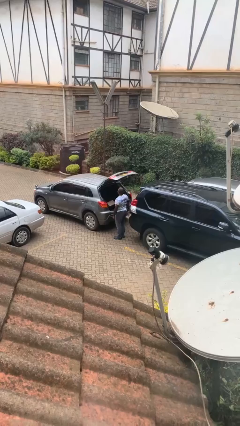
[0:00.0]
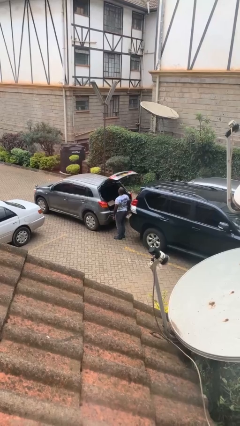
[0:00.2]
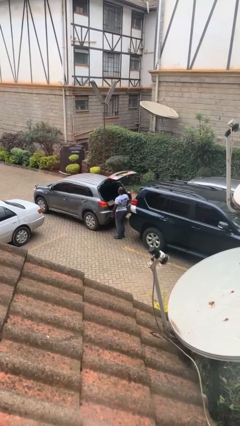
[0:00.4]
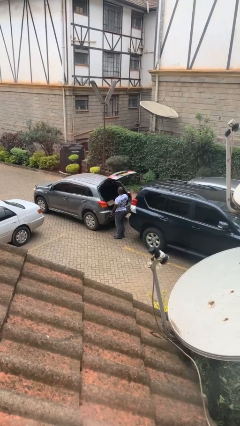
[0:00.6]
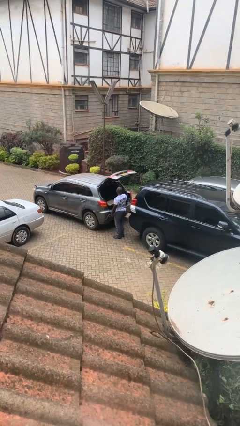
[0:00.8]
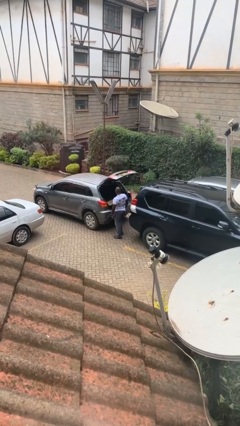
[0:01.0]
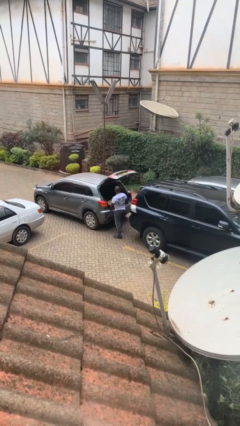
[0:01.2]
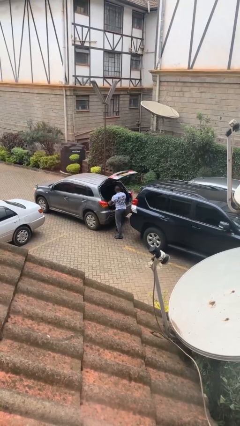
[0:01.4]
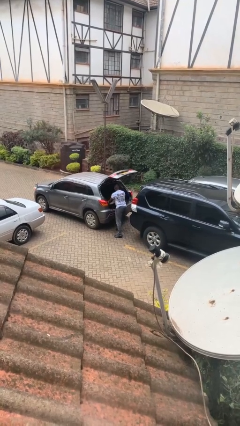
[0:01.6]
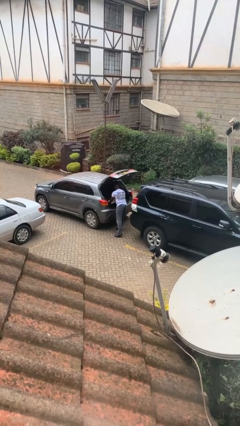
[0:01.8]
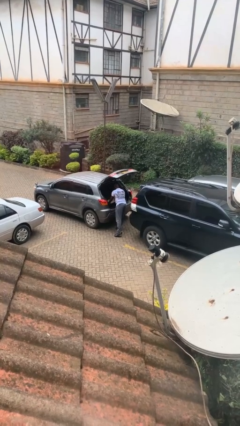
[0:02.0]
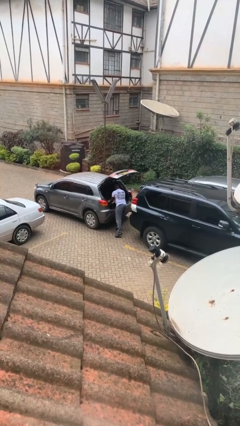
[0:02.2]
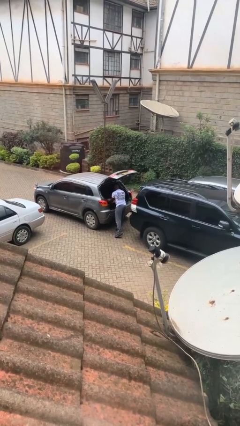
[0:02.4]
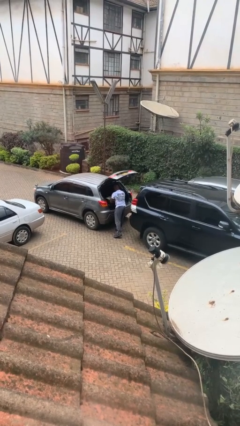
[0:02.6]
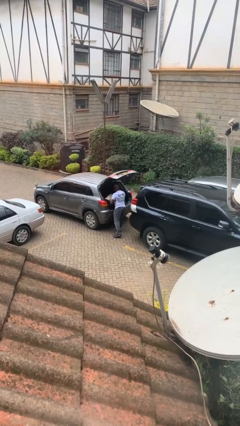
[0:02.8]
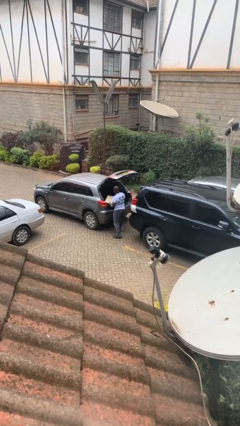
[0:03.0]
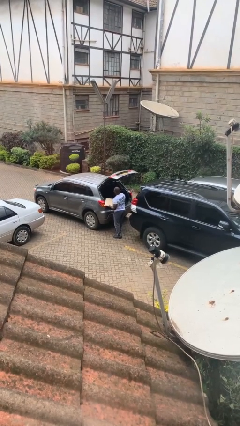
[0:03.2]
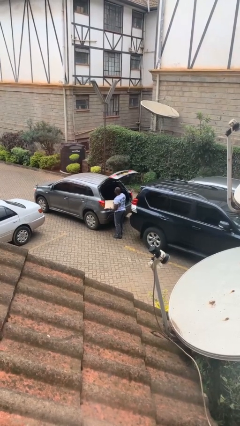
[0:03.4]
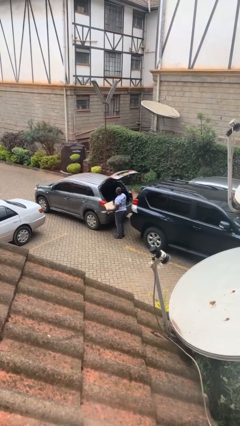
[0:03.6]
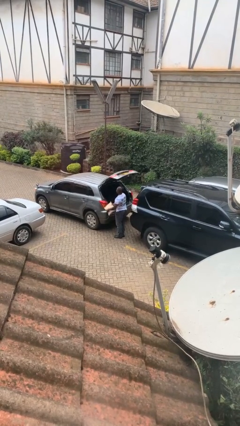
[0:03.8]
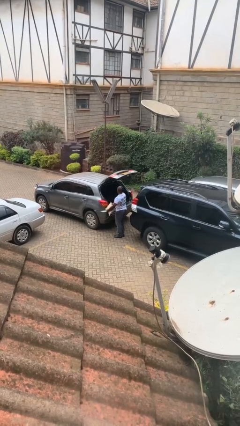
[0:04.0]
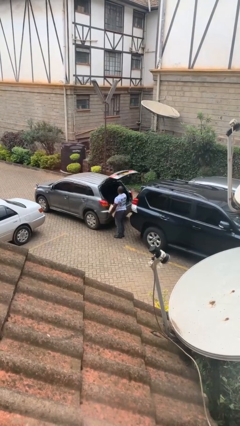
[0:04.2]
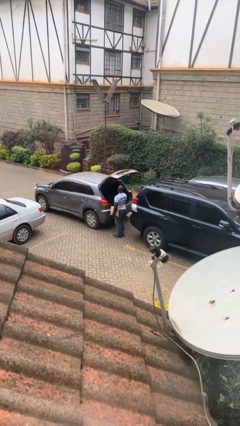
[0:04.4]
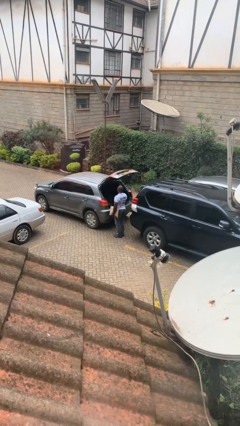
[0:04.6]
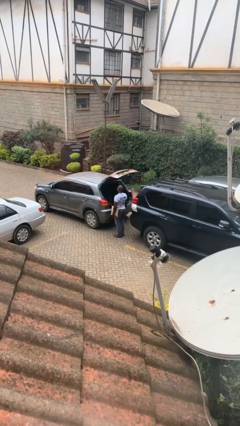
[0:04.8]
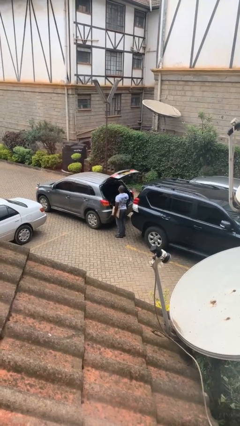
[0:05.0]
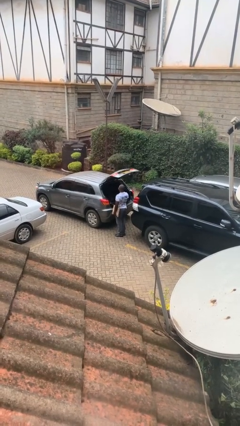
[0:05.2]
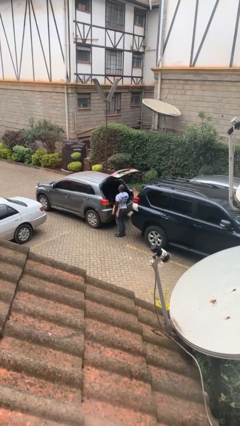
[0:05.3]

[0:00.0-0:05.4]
person unloads car

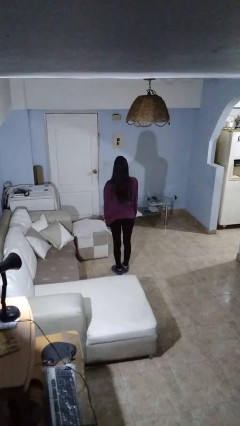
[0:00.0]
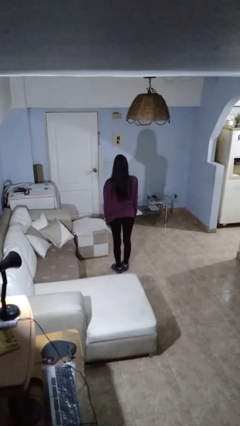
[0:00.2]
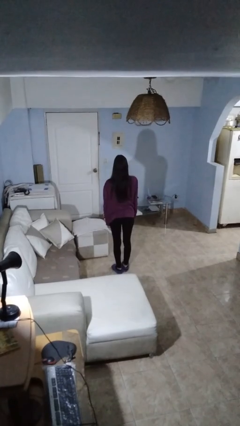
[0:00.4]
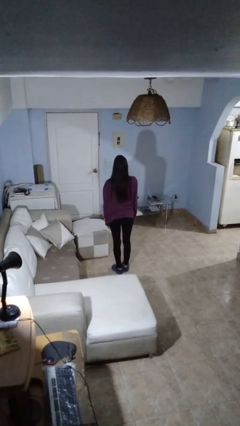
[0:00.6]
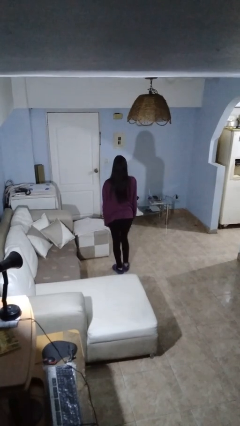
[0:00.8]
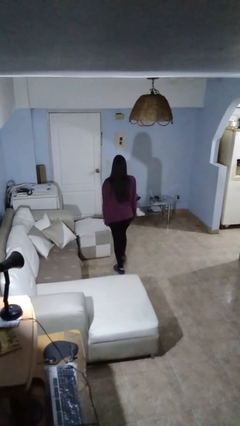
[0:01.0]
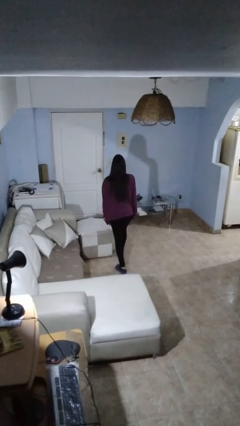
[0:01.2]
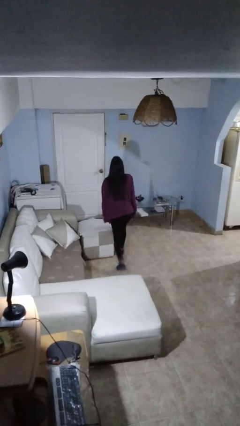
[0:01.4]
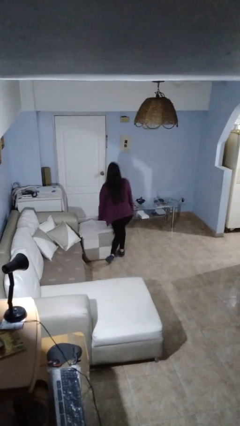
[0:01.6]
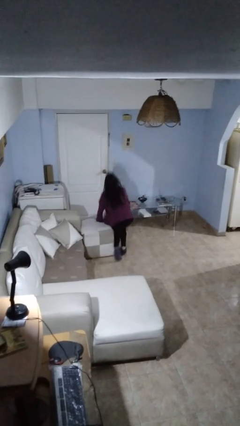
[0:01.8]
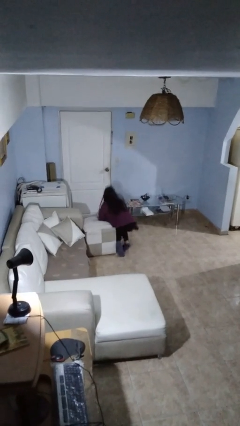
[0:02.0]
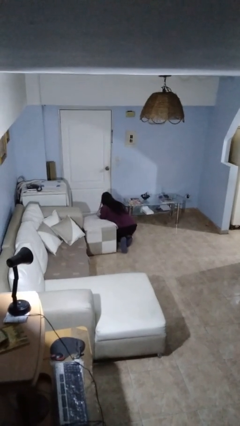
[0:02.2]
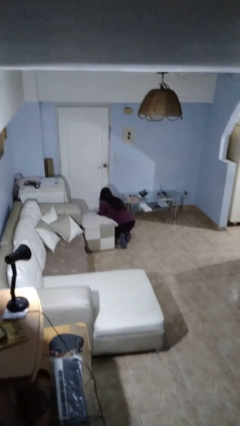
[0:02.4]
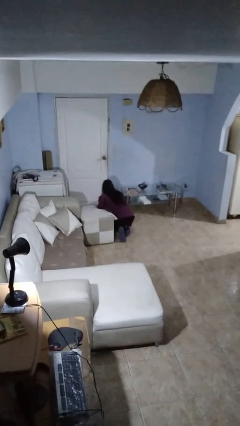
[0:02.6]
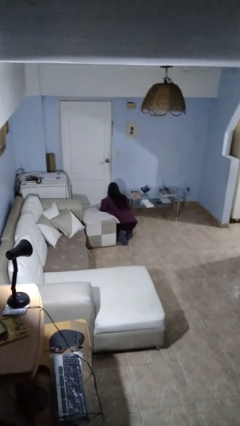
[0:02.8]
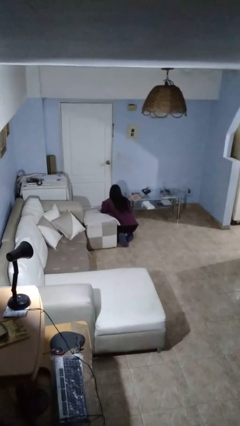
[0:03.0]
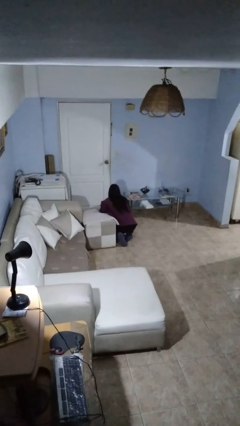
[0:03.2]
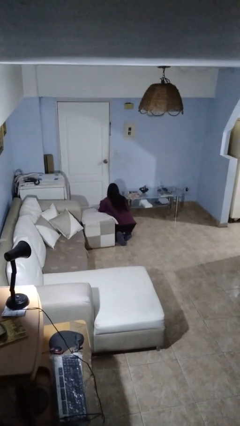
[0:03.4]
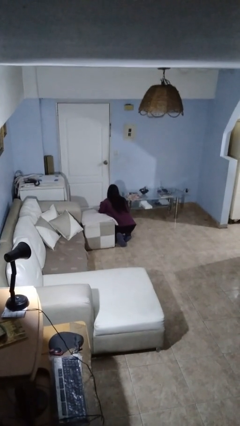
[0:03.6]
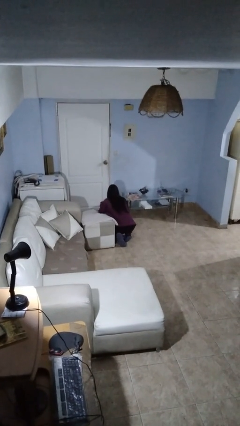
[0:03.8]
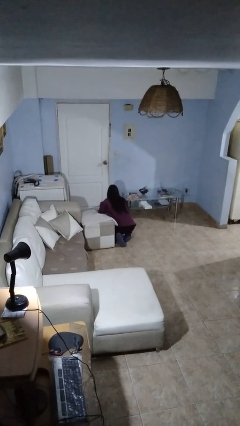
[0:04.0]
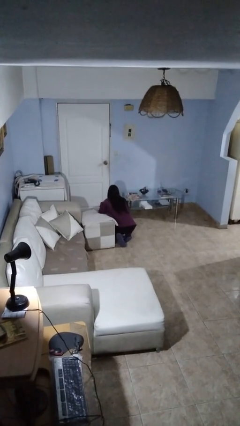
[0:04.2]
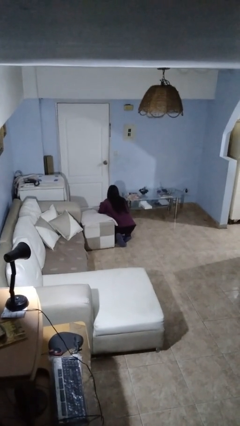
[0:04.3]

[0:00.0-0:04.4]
person trips on object on floor

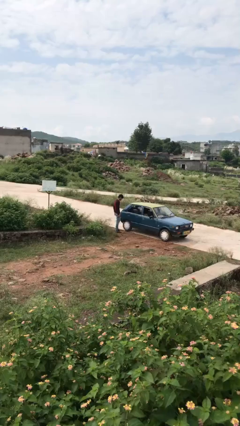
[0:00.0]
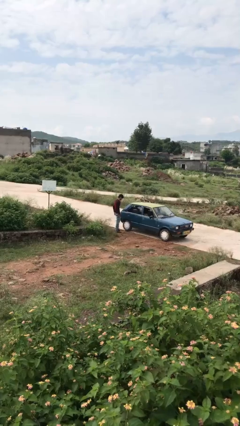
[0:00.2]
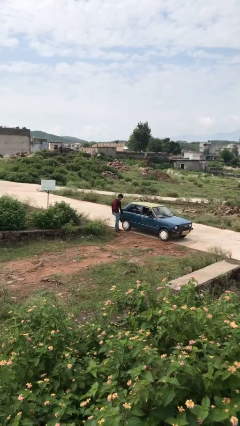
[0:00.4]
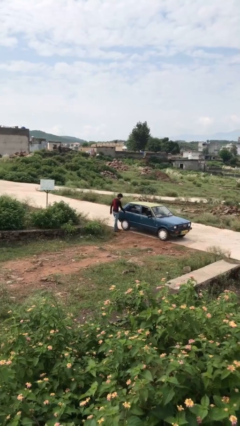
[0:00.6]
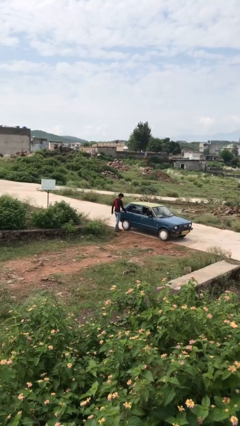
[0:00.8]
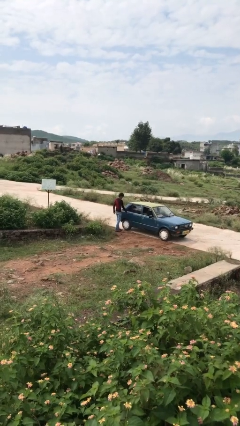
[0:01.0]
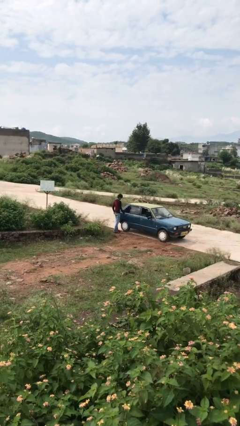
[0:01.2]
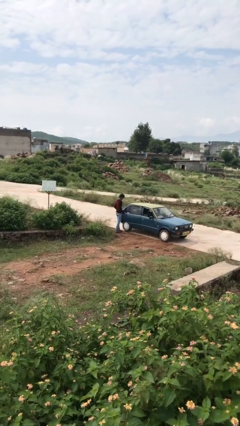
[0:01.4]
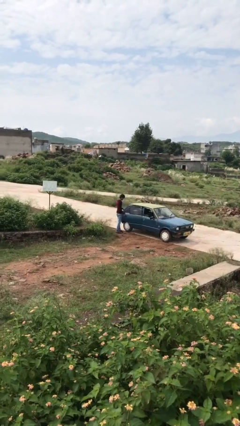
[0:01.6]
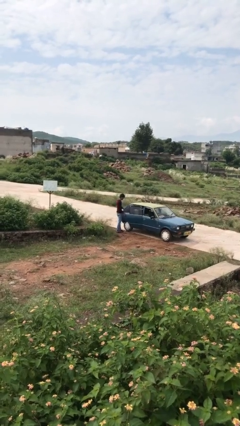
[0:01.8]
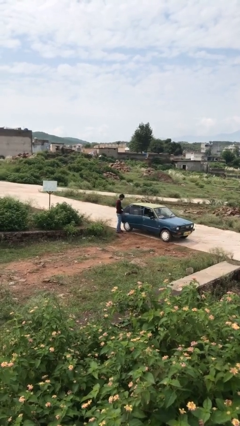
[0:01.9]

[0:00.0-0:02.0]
person opens car door

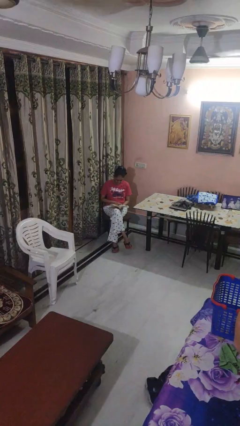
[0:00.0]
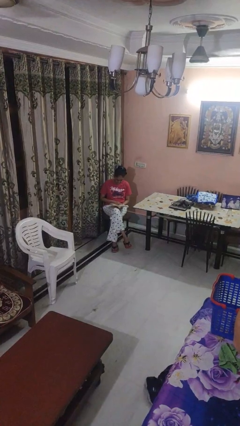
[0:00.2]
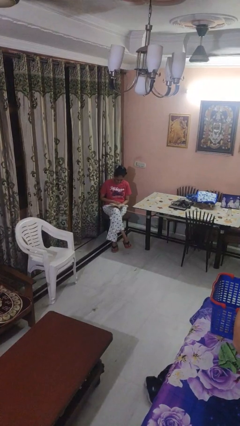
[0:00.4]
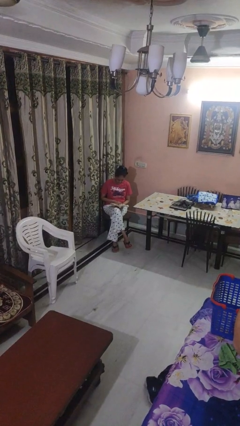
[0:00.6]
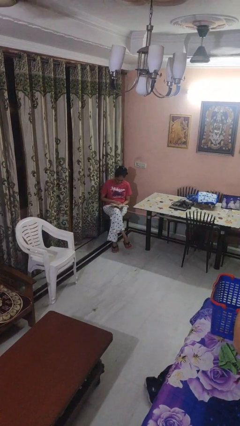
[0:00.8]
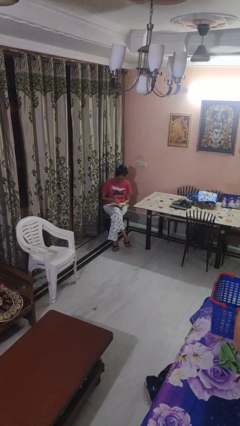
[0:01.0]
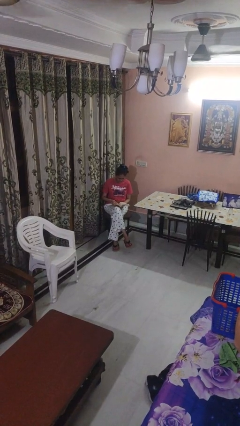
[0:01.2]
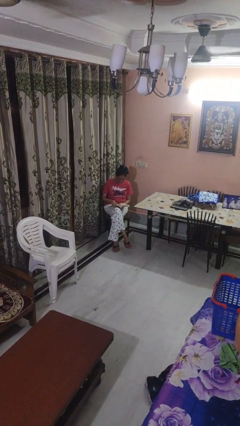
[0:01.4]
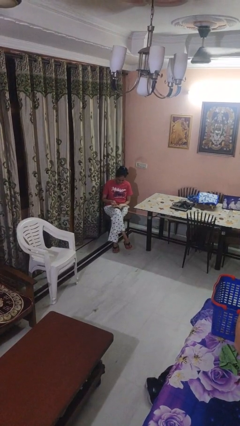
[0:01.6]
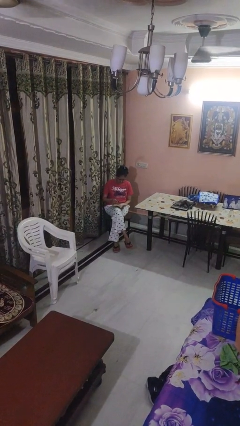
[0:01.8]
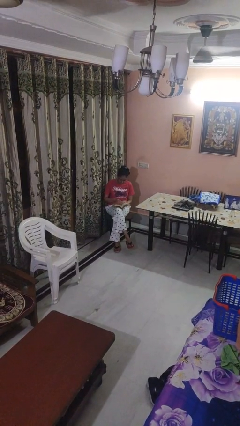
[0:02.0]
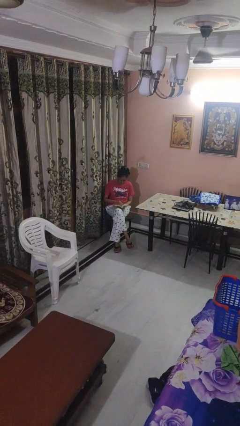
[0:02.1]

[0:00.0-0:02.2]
person reads book

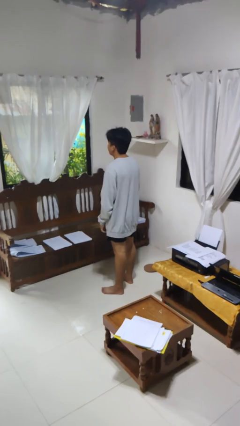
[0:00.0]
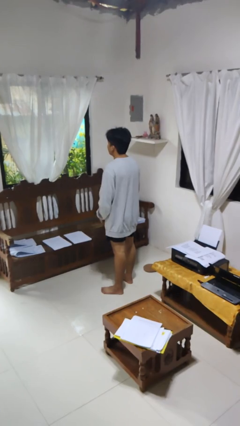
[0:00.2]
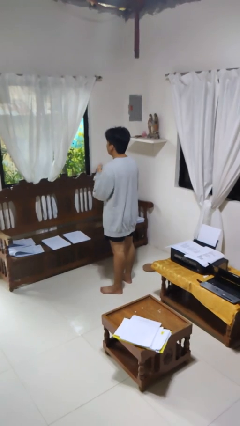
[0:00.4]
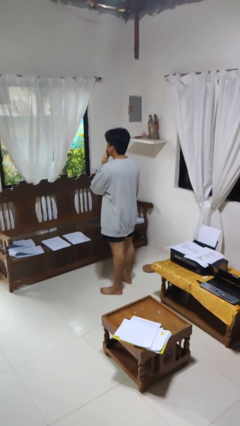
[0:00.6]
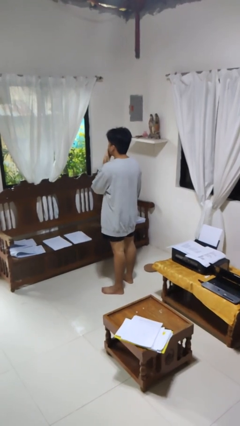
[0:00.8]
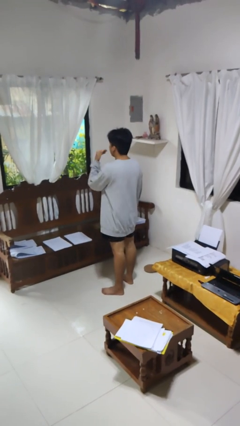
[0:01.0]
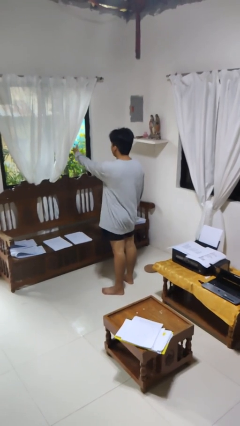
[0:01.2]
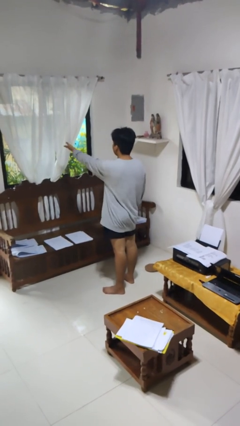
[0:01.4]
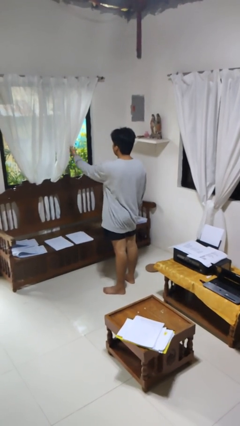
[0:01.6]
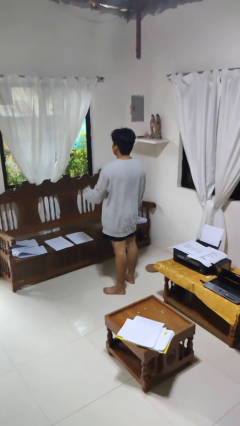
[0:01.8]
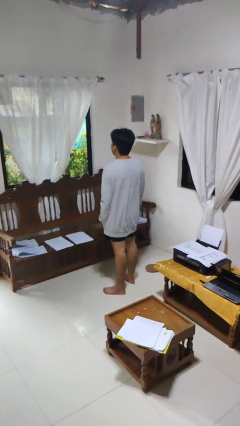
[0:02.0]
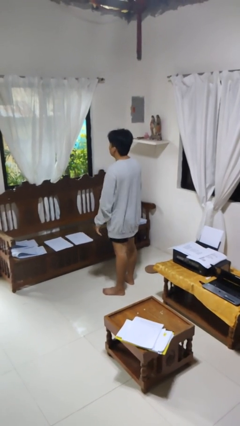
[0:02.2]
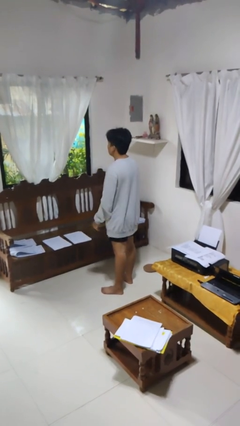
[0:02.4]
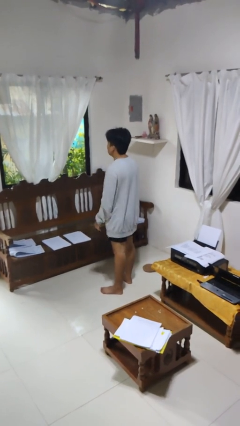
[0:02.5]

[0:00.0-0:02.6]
person gestures blow kiss

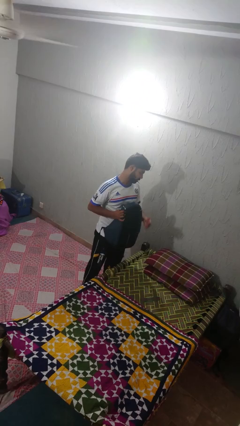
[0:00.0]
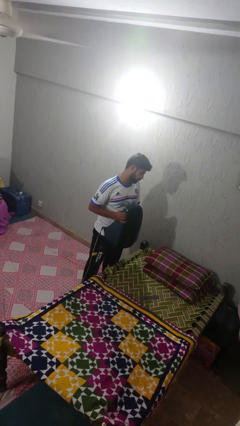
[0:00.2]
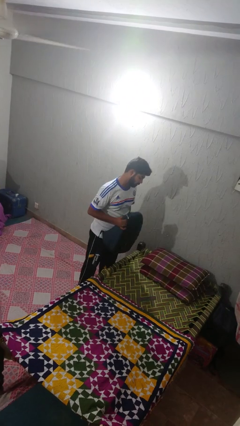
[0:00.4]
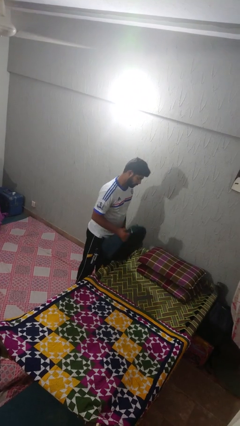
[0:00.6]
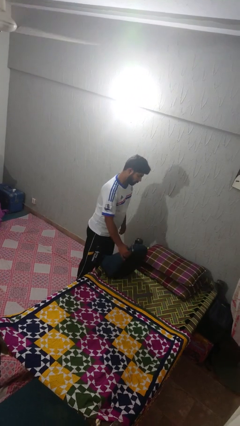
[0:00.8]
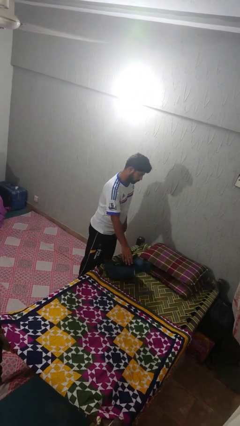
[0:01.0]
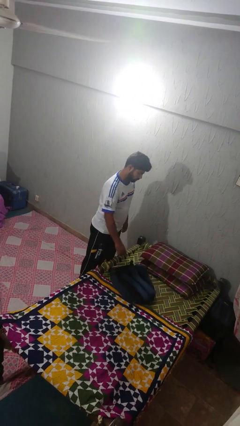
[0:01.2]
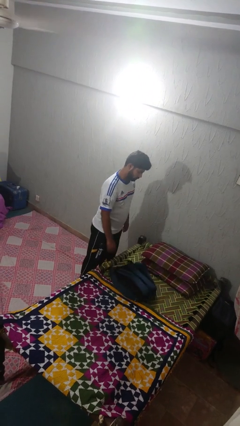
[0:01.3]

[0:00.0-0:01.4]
person puts down object on bed
